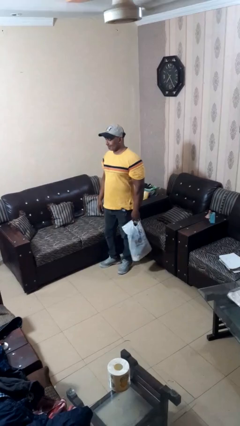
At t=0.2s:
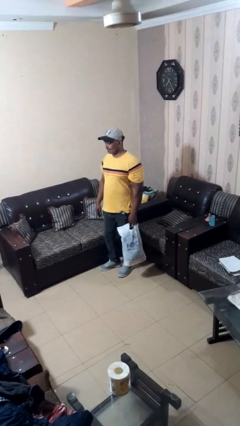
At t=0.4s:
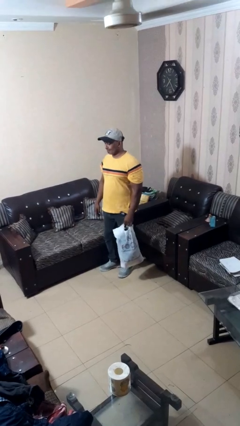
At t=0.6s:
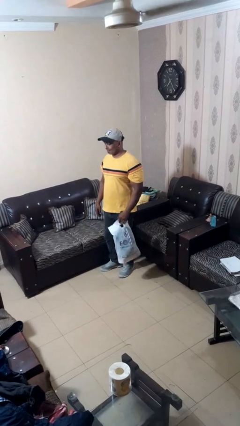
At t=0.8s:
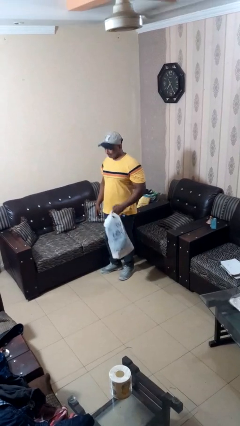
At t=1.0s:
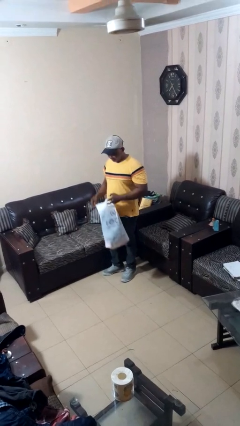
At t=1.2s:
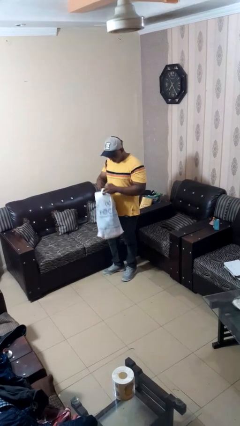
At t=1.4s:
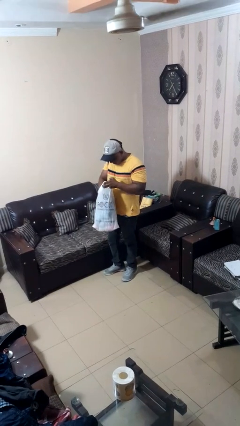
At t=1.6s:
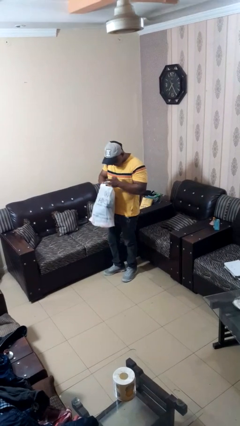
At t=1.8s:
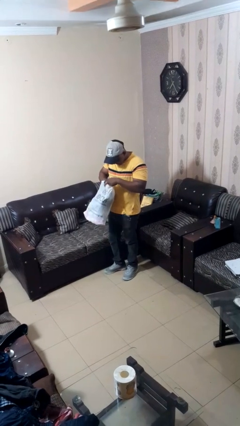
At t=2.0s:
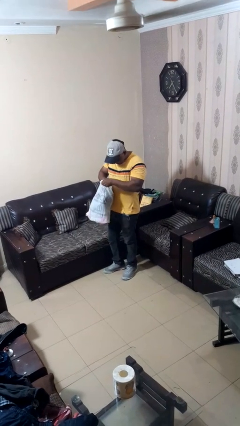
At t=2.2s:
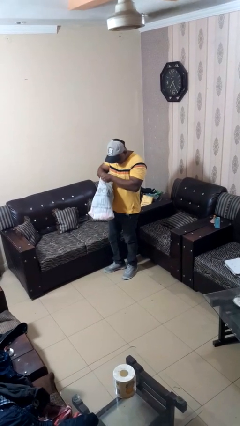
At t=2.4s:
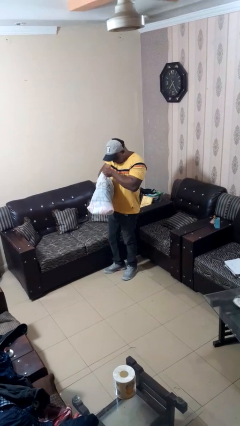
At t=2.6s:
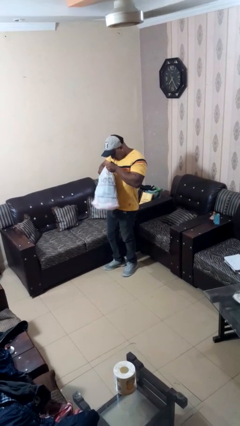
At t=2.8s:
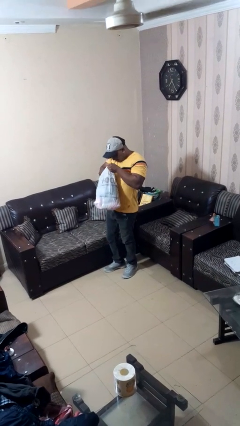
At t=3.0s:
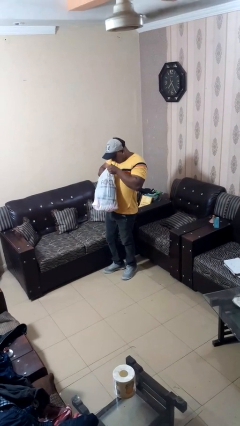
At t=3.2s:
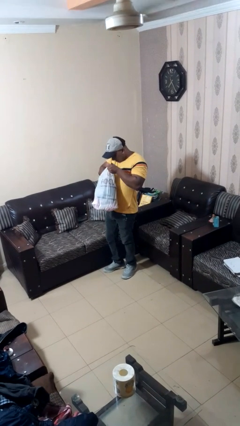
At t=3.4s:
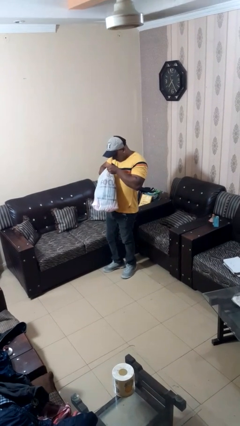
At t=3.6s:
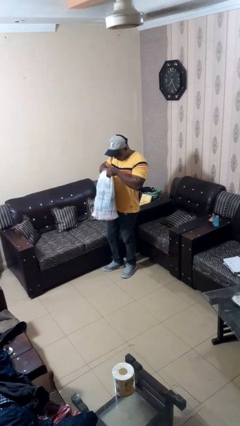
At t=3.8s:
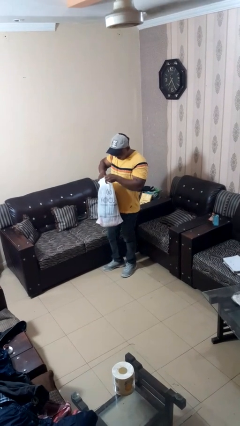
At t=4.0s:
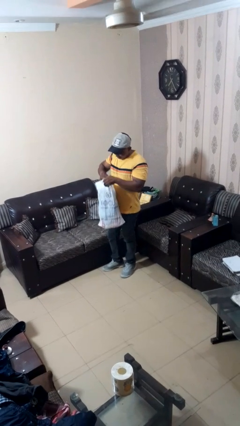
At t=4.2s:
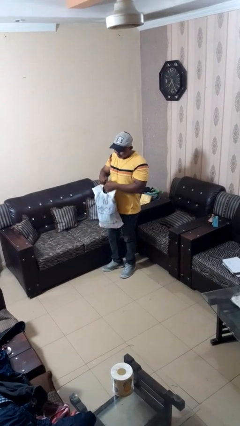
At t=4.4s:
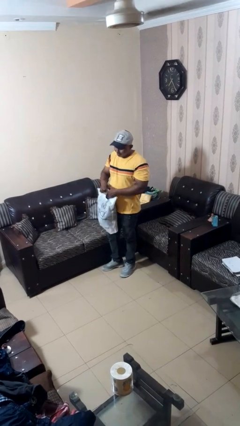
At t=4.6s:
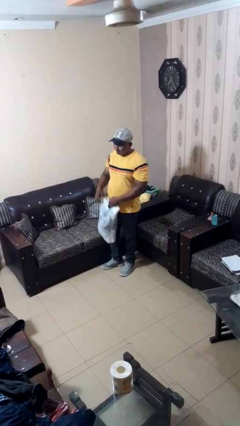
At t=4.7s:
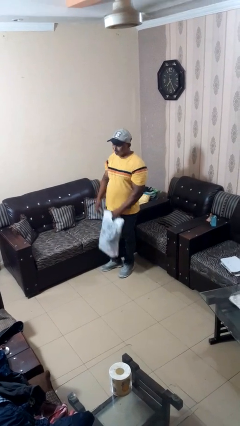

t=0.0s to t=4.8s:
person searches in bag

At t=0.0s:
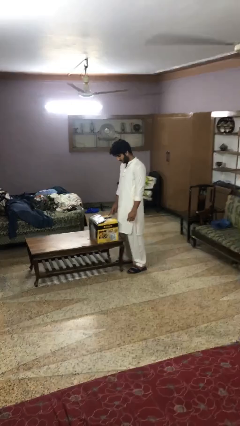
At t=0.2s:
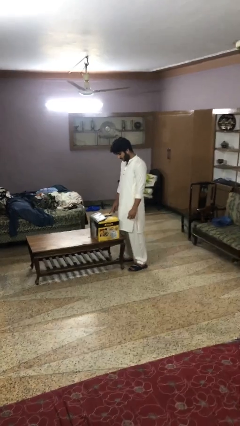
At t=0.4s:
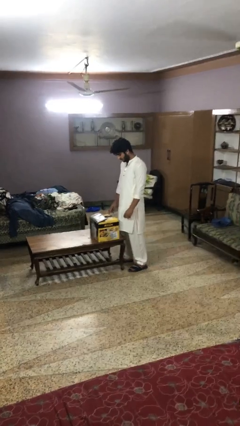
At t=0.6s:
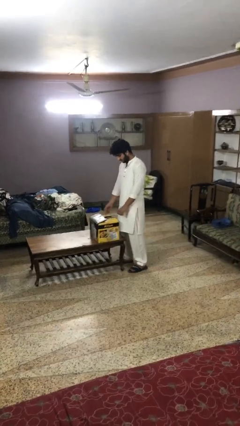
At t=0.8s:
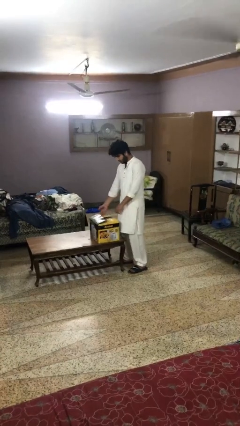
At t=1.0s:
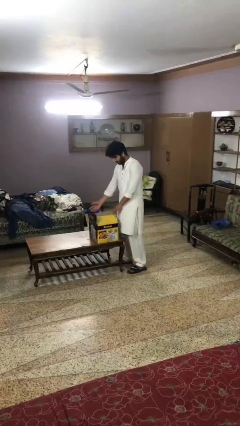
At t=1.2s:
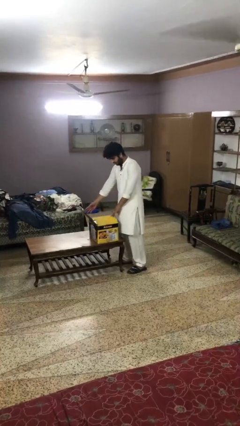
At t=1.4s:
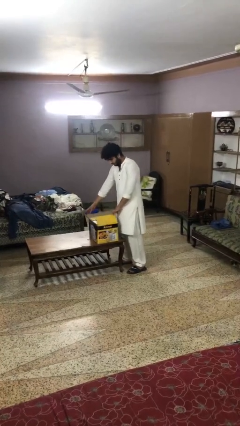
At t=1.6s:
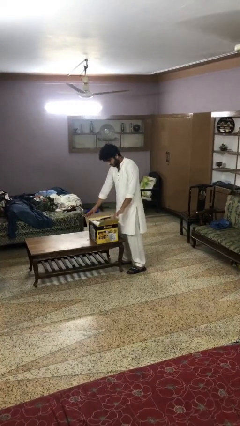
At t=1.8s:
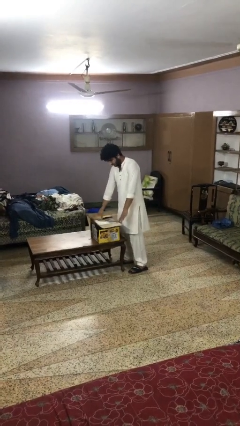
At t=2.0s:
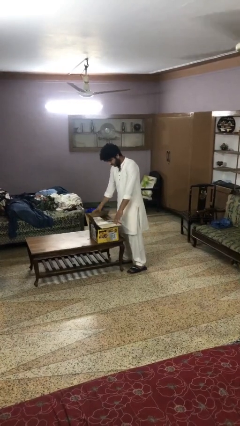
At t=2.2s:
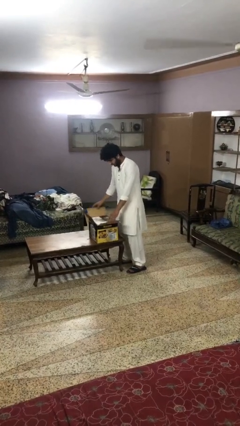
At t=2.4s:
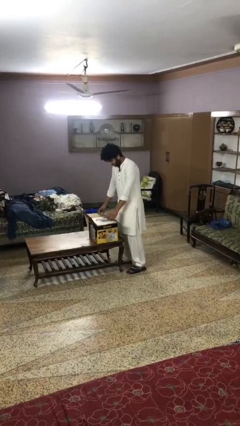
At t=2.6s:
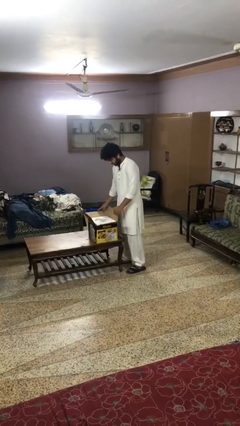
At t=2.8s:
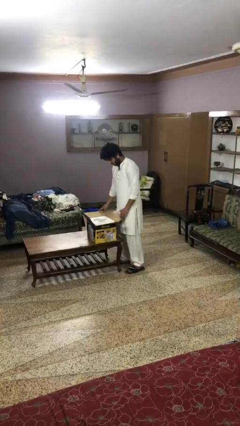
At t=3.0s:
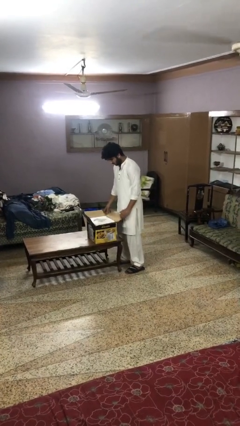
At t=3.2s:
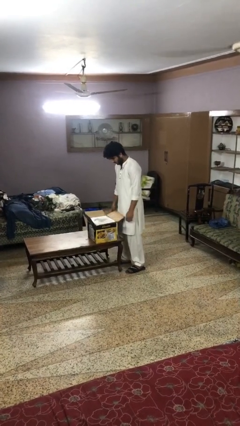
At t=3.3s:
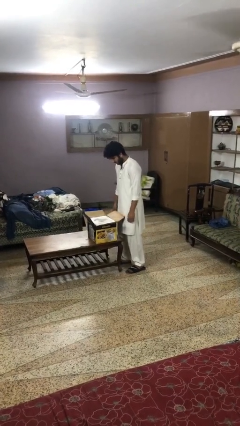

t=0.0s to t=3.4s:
person opens box

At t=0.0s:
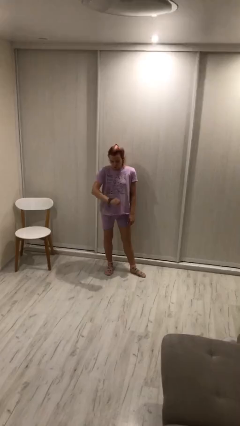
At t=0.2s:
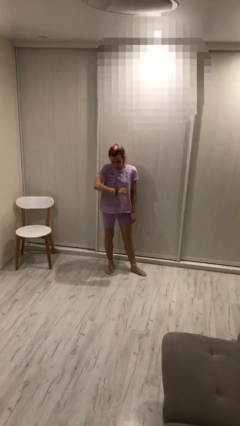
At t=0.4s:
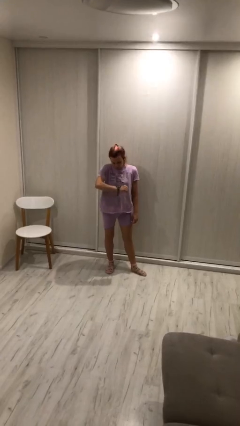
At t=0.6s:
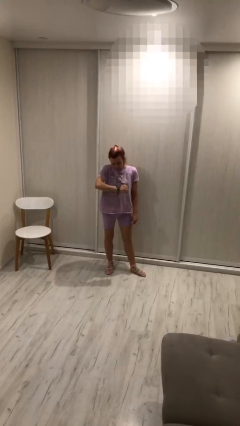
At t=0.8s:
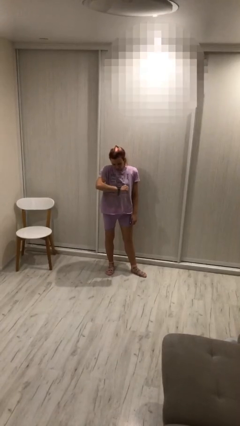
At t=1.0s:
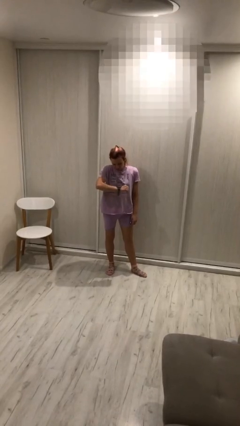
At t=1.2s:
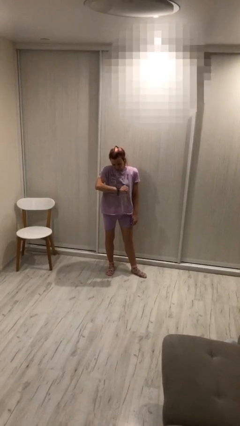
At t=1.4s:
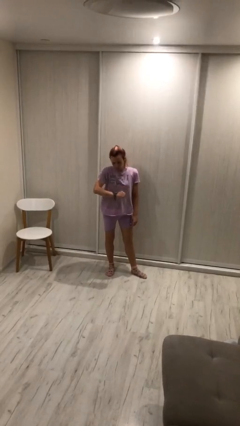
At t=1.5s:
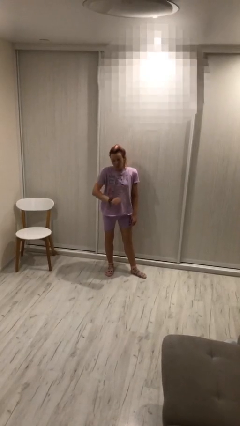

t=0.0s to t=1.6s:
person looks at wristwatch

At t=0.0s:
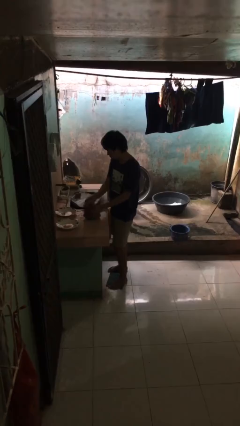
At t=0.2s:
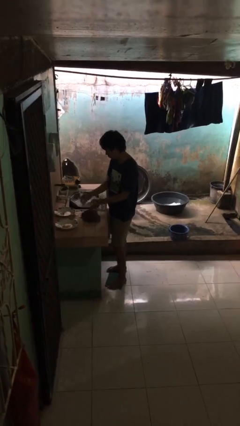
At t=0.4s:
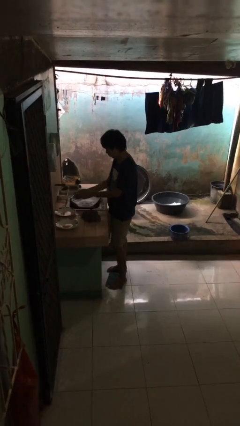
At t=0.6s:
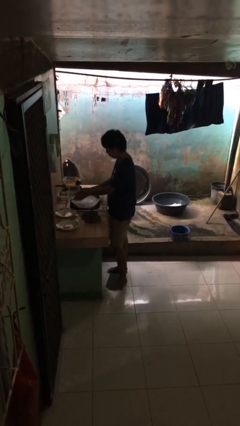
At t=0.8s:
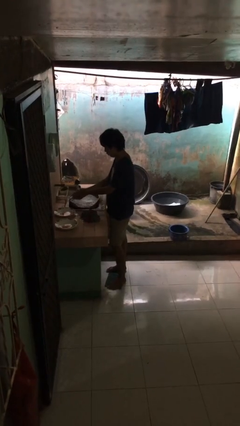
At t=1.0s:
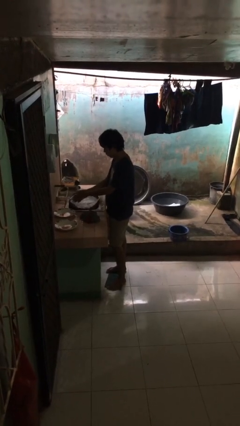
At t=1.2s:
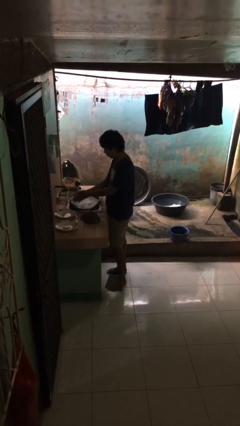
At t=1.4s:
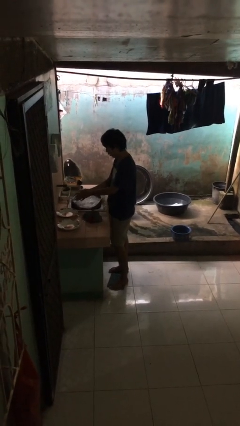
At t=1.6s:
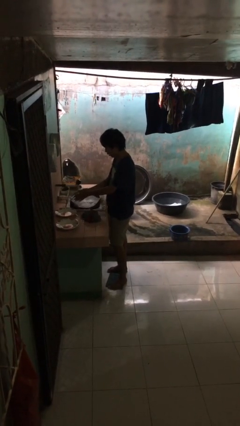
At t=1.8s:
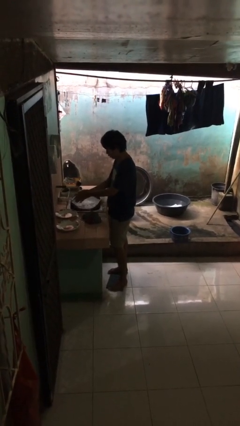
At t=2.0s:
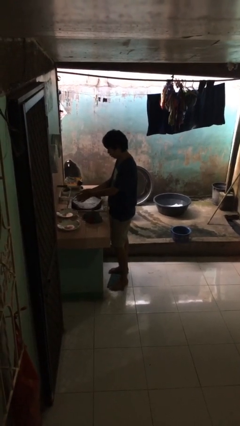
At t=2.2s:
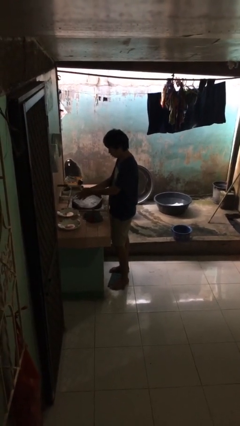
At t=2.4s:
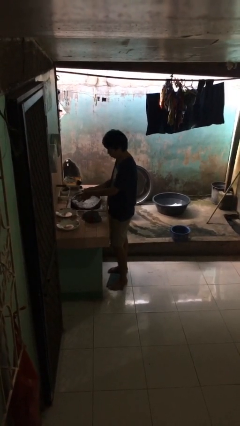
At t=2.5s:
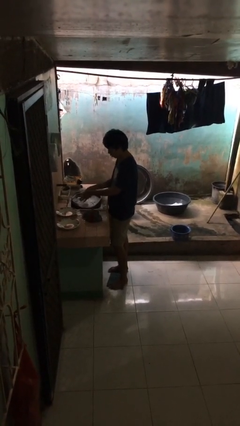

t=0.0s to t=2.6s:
person washes hands

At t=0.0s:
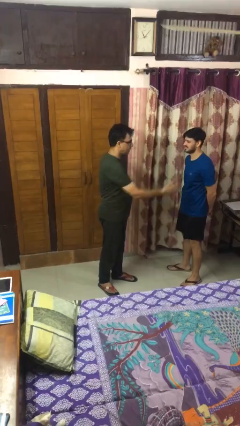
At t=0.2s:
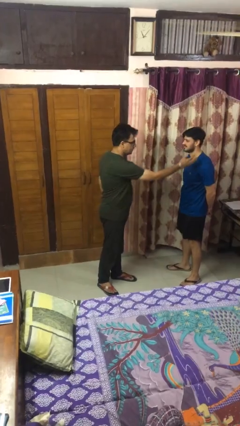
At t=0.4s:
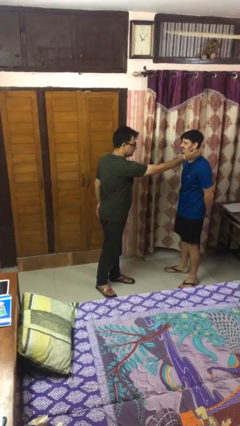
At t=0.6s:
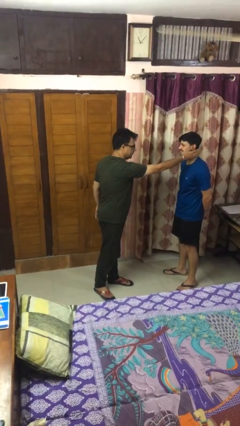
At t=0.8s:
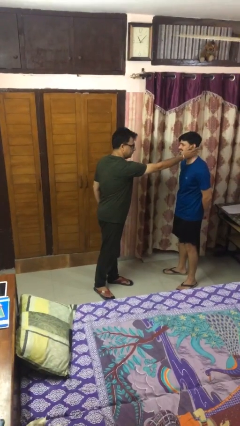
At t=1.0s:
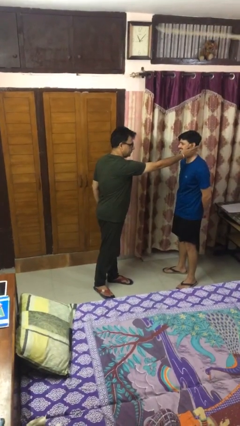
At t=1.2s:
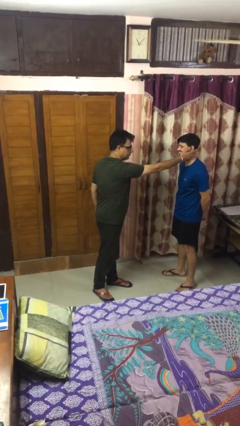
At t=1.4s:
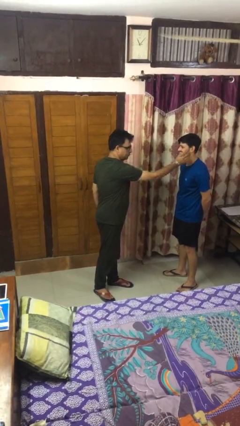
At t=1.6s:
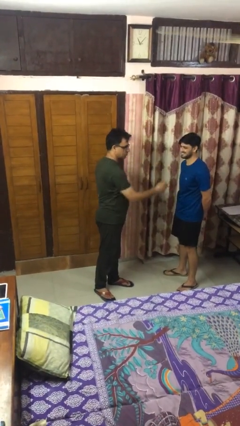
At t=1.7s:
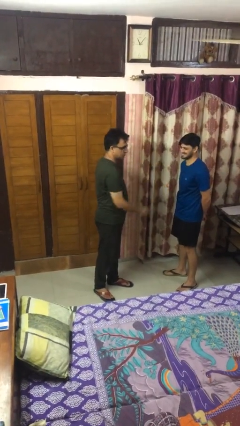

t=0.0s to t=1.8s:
person touches face of person

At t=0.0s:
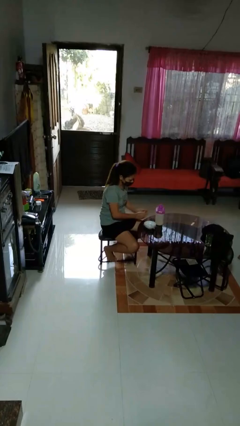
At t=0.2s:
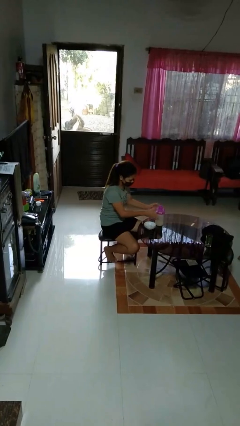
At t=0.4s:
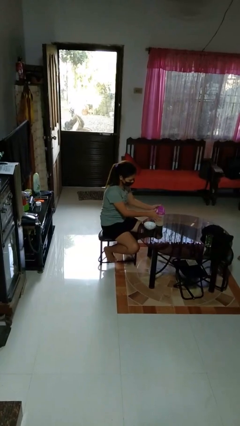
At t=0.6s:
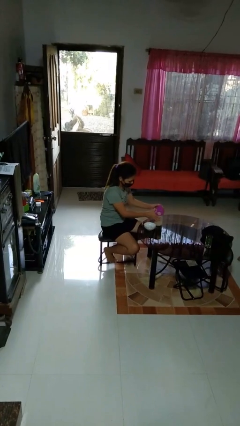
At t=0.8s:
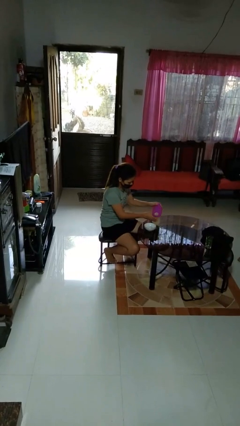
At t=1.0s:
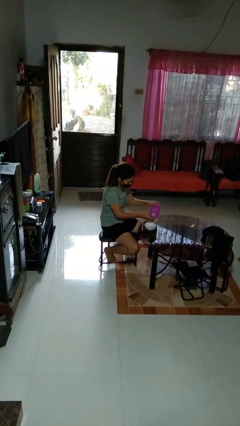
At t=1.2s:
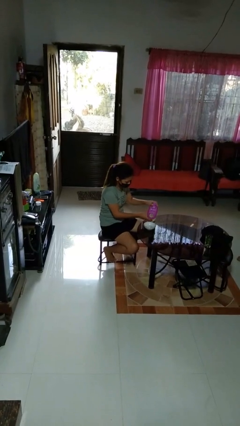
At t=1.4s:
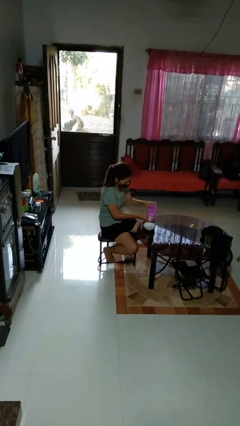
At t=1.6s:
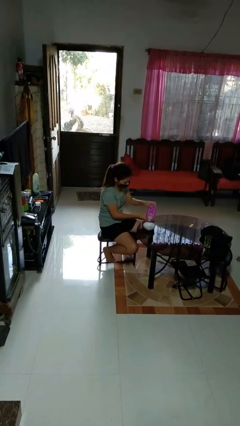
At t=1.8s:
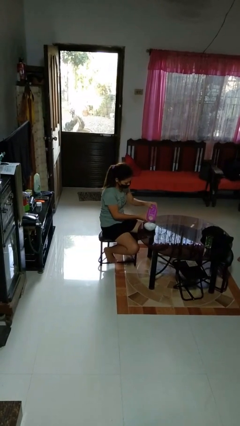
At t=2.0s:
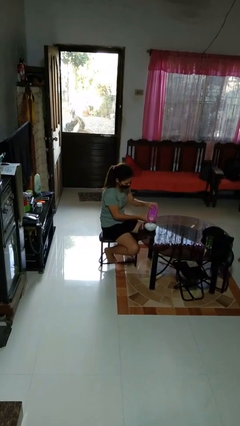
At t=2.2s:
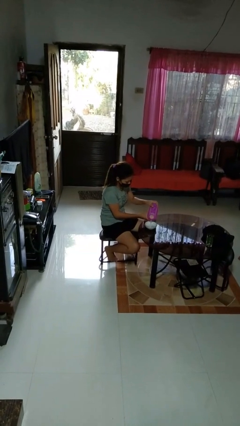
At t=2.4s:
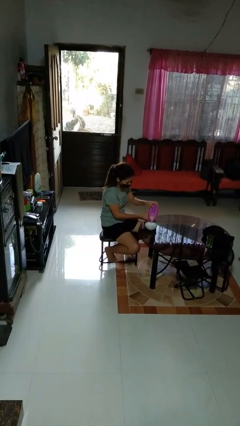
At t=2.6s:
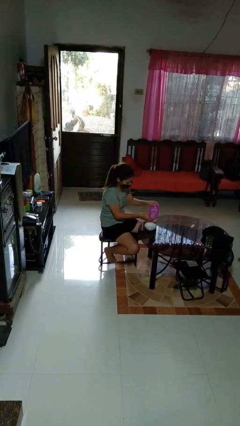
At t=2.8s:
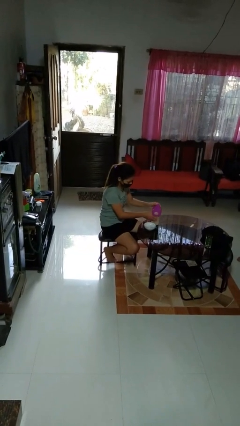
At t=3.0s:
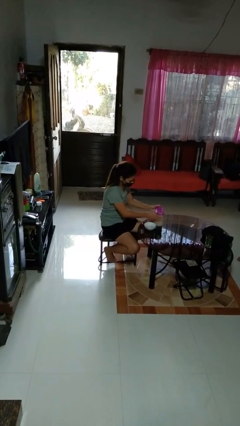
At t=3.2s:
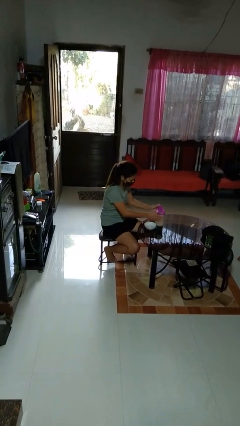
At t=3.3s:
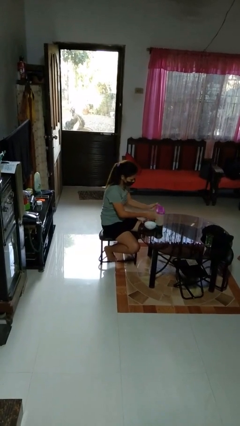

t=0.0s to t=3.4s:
person pours into bowl
